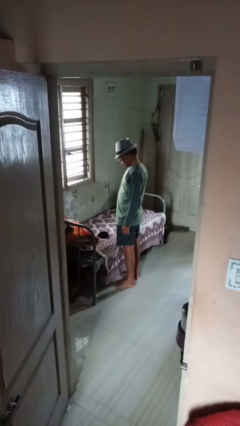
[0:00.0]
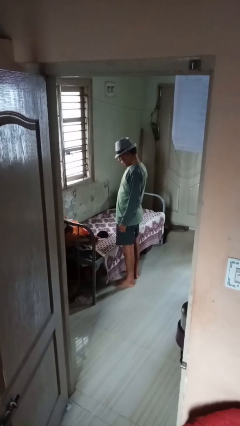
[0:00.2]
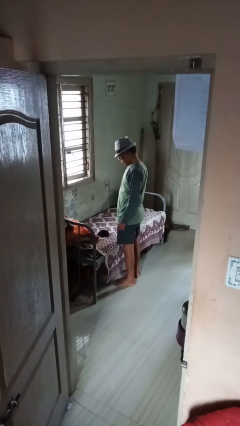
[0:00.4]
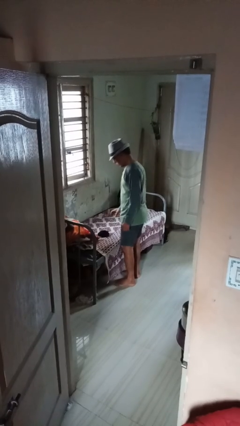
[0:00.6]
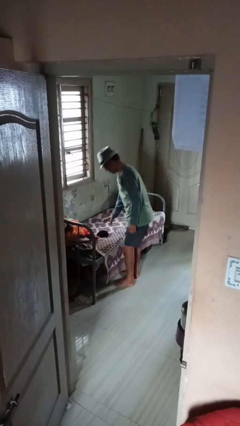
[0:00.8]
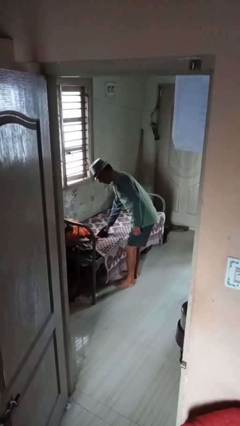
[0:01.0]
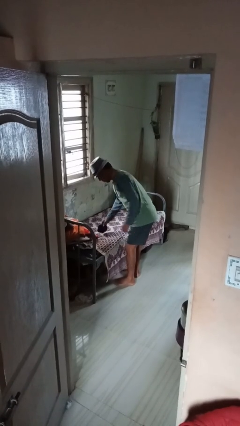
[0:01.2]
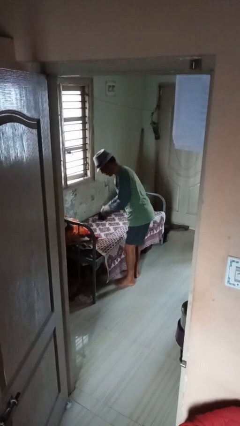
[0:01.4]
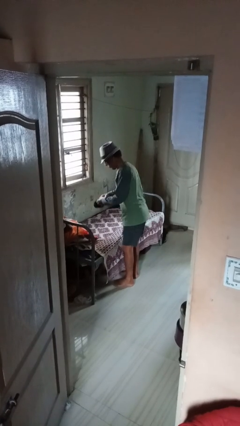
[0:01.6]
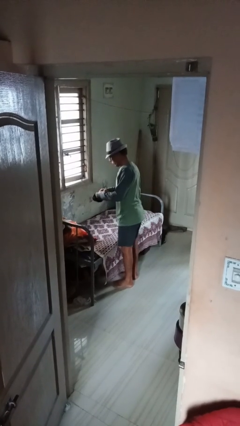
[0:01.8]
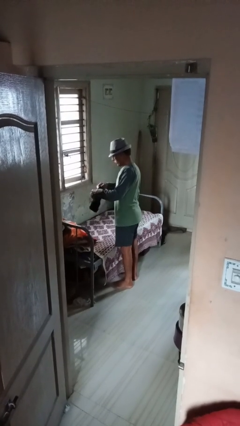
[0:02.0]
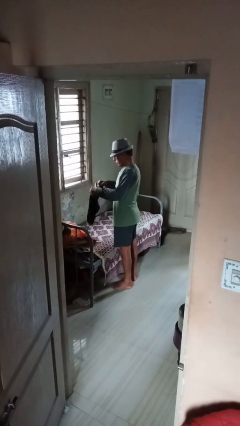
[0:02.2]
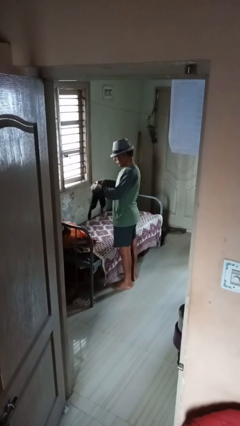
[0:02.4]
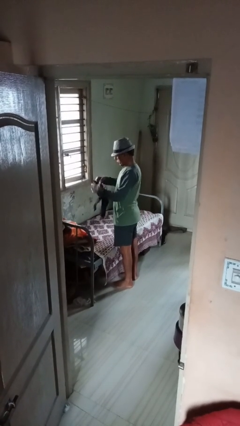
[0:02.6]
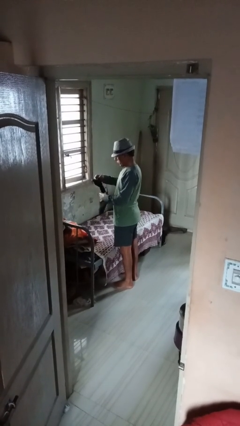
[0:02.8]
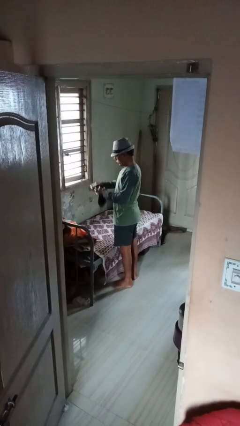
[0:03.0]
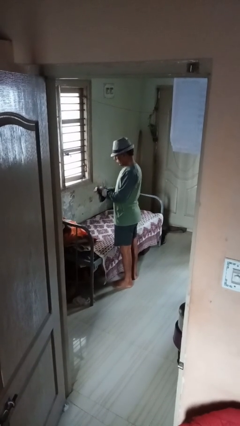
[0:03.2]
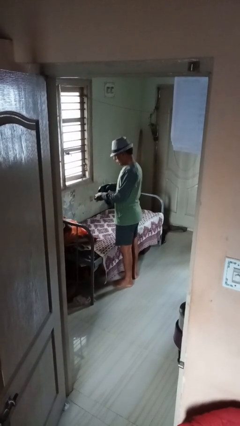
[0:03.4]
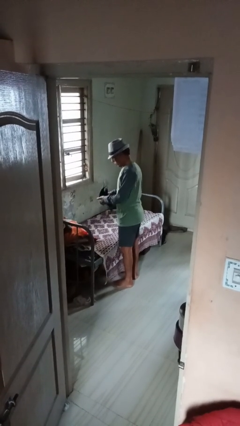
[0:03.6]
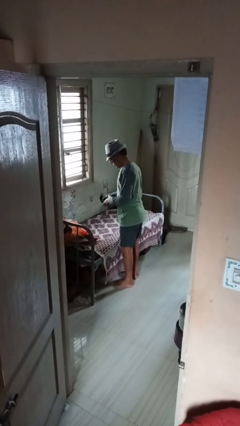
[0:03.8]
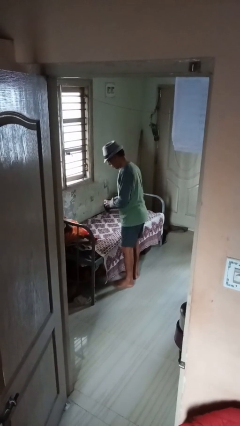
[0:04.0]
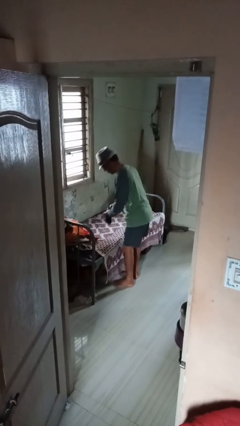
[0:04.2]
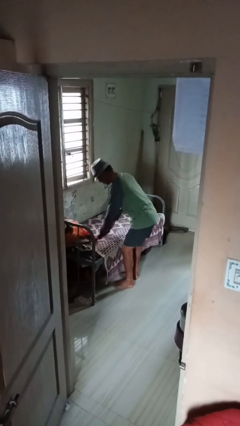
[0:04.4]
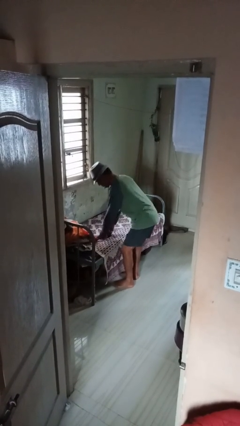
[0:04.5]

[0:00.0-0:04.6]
person folds socks

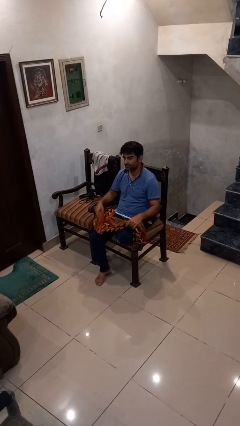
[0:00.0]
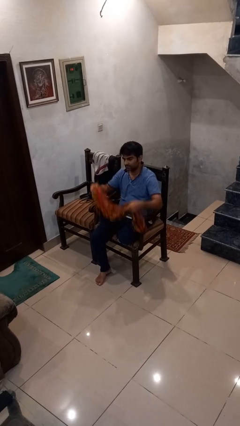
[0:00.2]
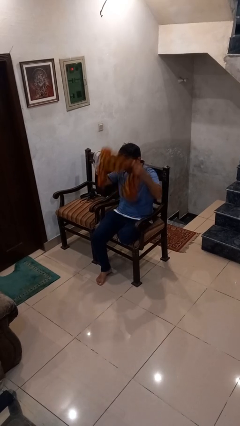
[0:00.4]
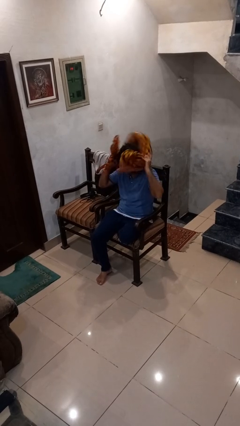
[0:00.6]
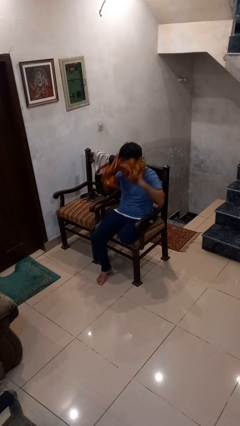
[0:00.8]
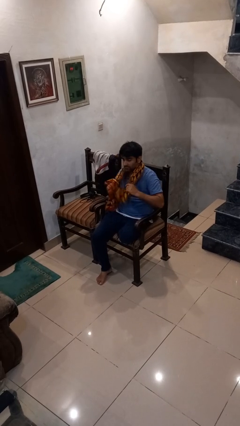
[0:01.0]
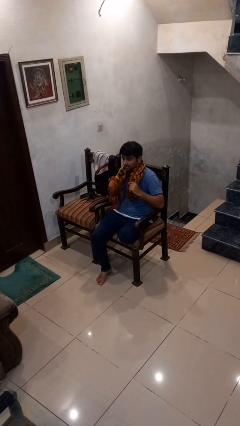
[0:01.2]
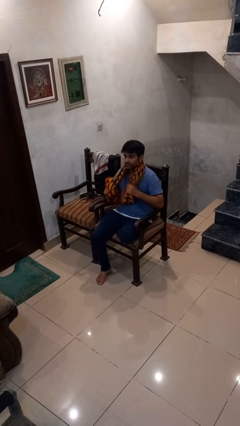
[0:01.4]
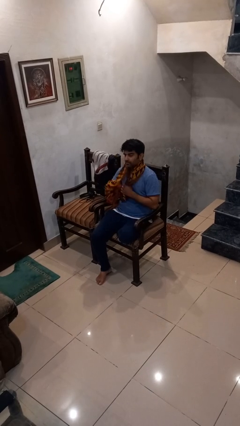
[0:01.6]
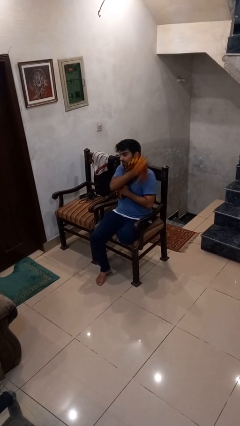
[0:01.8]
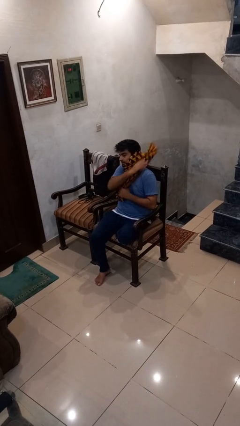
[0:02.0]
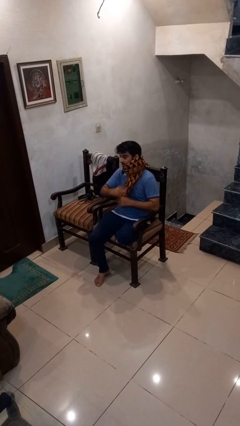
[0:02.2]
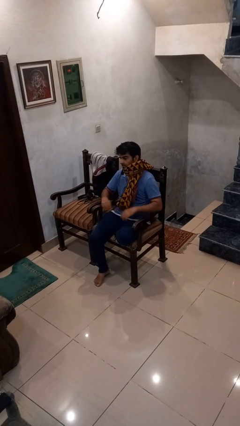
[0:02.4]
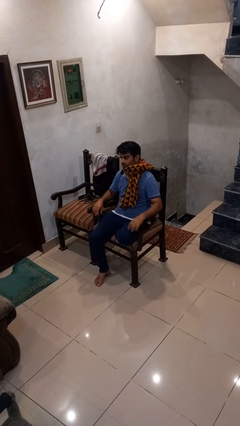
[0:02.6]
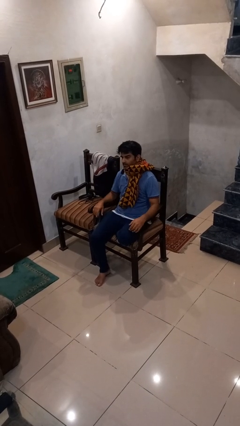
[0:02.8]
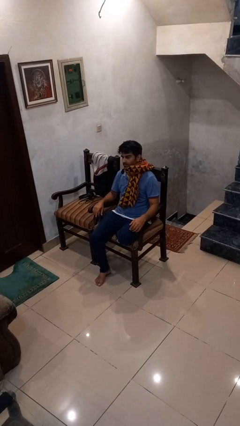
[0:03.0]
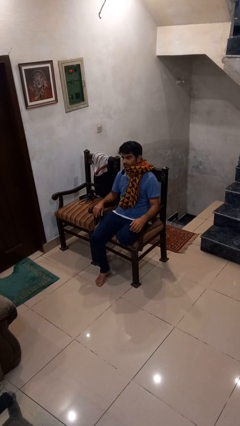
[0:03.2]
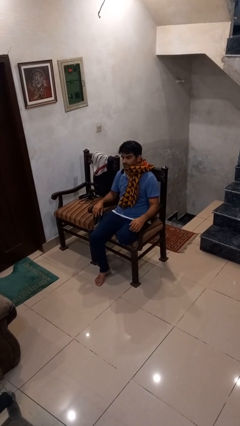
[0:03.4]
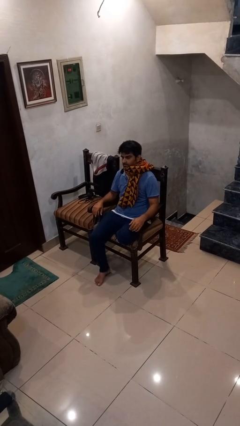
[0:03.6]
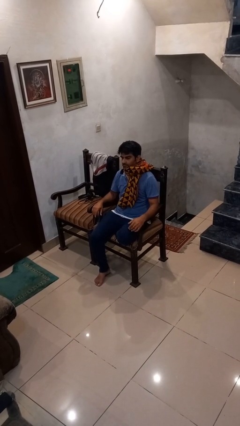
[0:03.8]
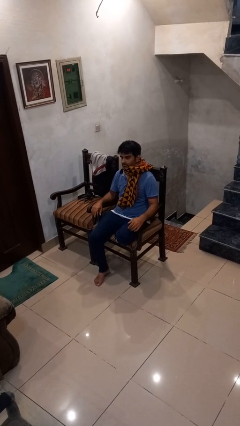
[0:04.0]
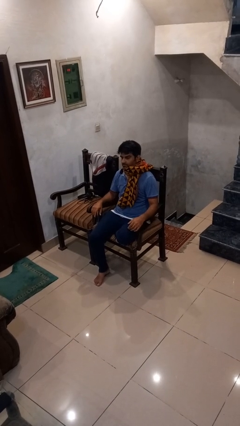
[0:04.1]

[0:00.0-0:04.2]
person puts on scarf

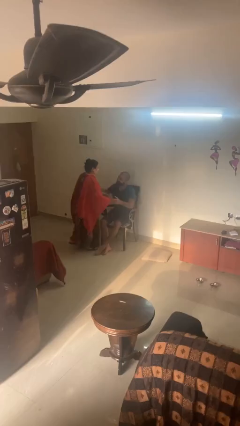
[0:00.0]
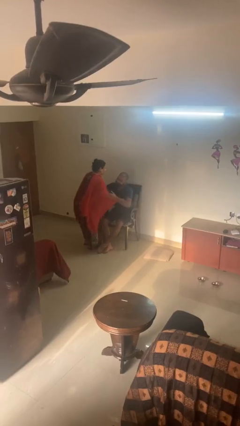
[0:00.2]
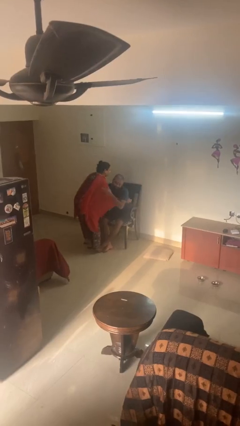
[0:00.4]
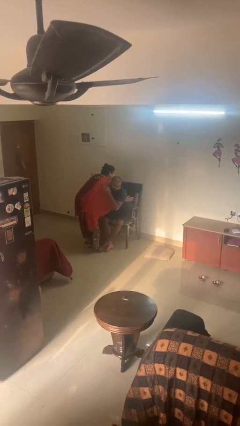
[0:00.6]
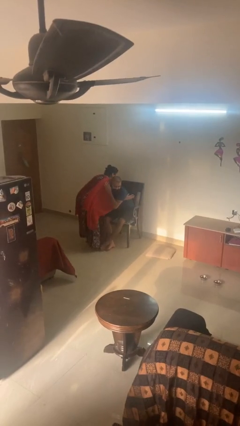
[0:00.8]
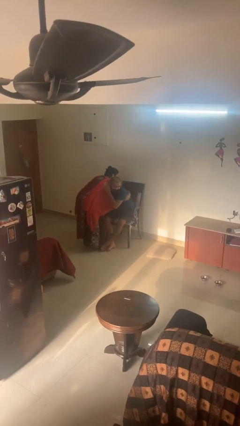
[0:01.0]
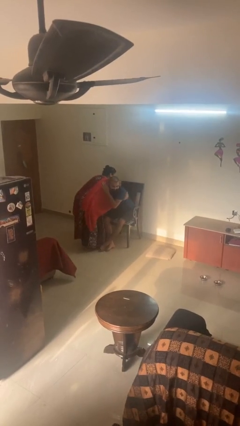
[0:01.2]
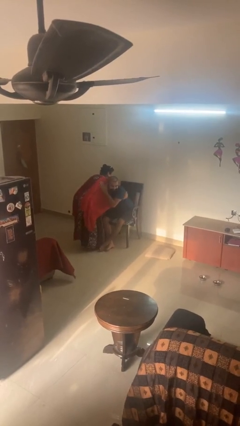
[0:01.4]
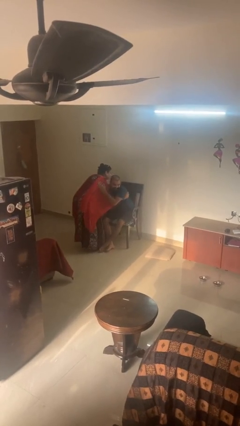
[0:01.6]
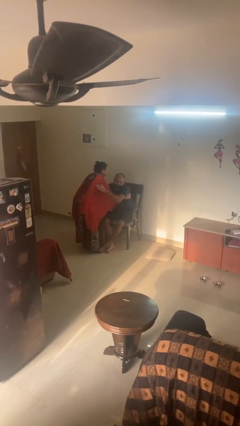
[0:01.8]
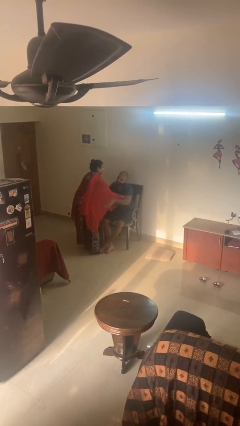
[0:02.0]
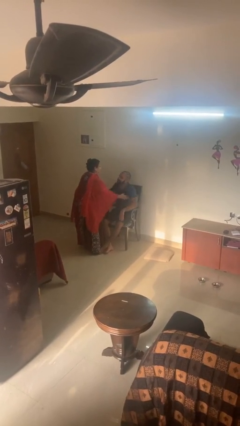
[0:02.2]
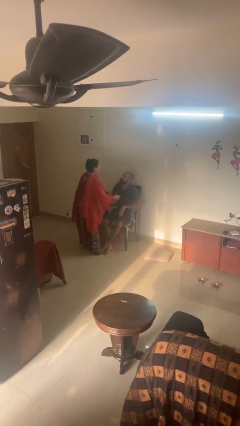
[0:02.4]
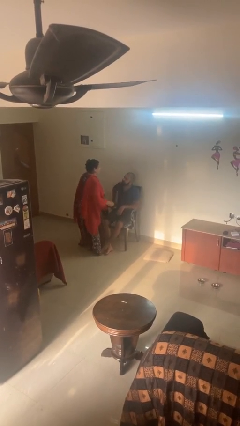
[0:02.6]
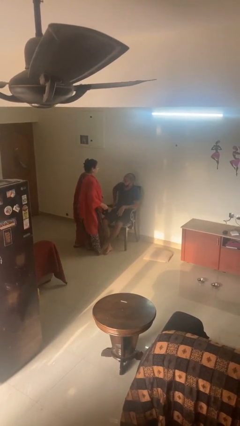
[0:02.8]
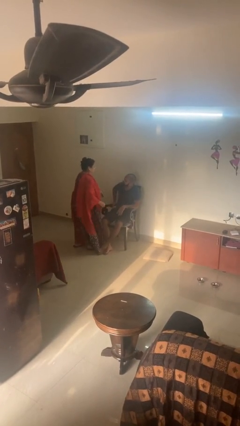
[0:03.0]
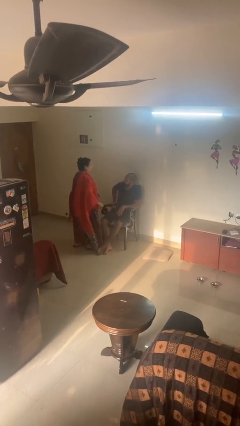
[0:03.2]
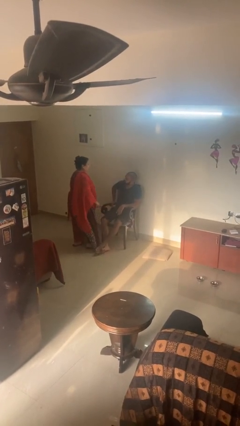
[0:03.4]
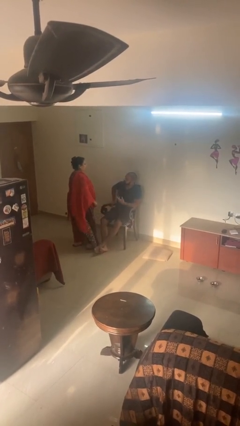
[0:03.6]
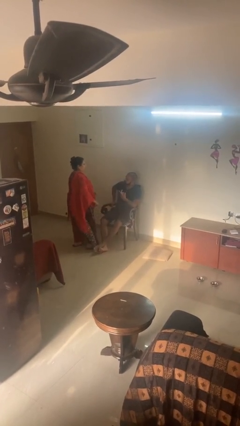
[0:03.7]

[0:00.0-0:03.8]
person embraces person

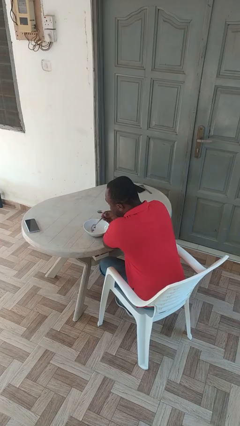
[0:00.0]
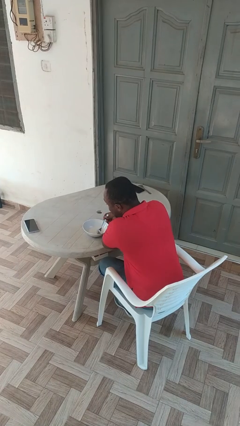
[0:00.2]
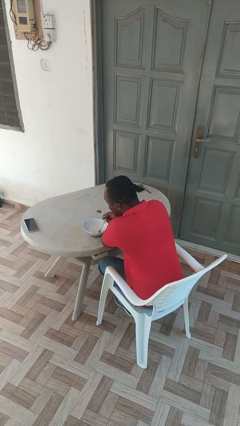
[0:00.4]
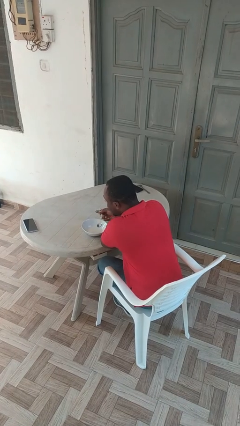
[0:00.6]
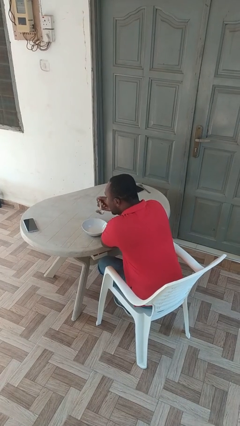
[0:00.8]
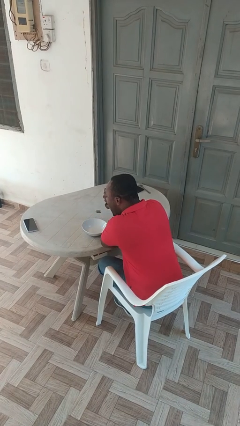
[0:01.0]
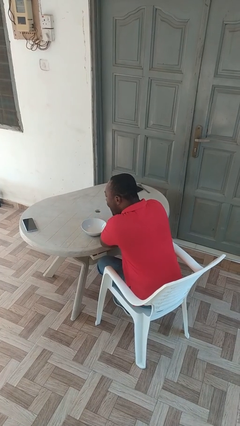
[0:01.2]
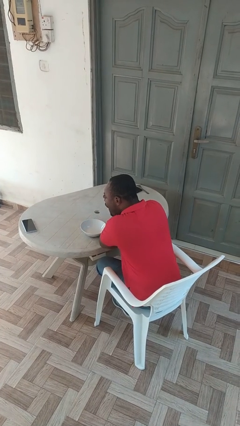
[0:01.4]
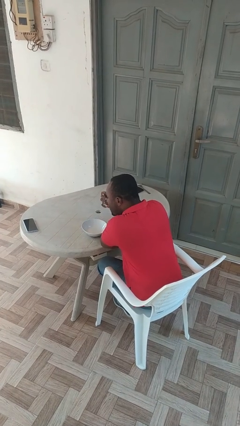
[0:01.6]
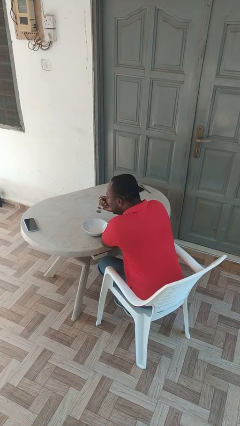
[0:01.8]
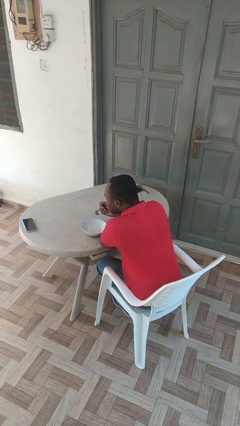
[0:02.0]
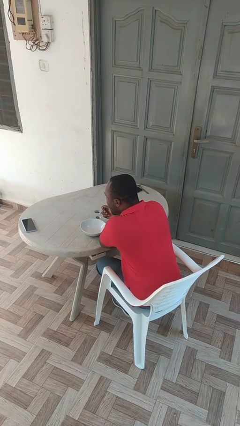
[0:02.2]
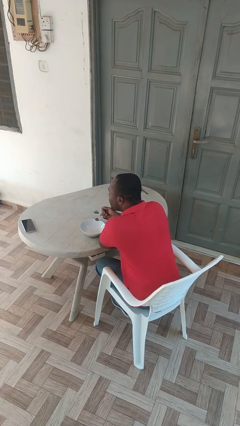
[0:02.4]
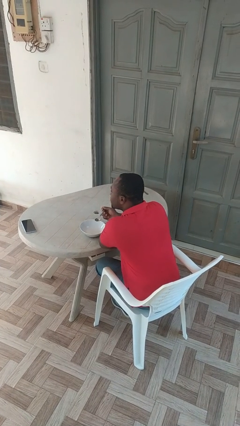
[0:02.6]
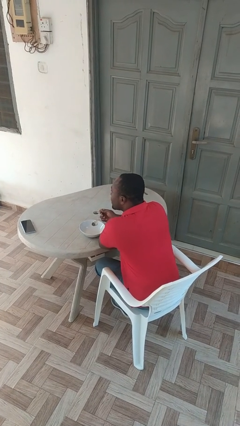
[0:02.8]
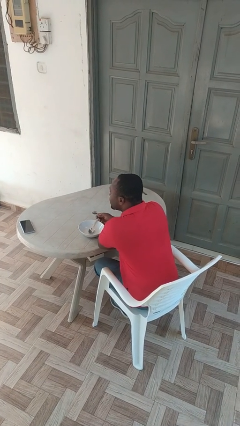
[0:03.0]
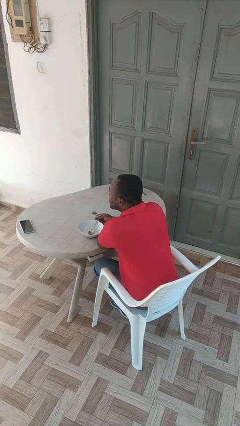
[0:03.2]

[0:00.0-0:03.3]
person eats with utensil

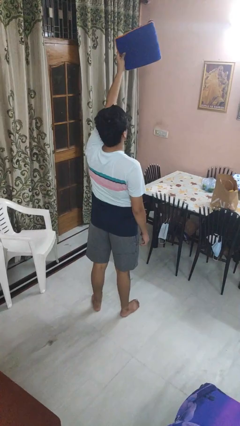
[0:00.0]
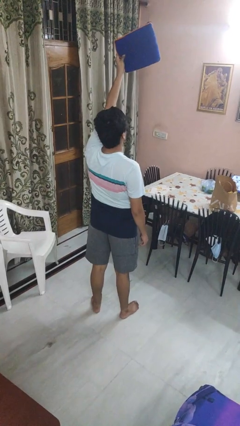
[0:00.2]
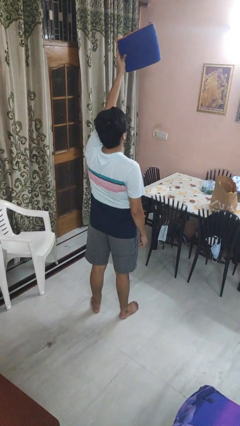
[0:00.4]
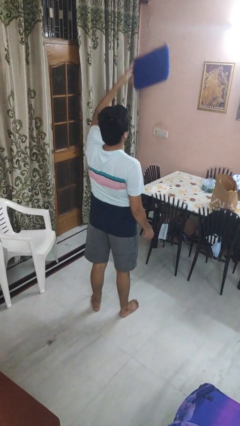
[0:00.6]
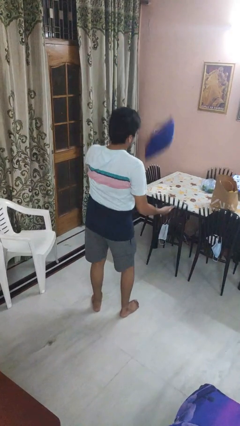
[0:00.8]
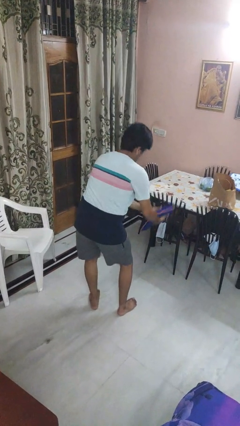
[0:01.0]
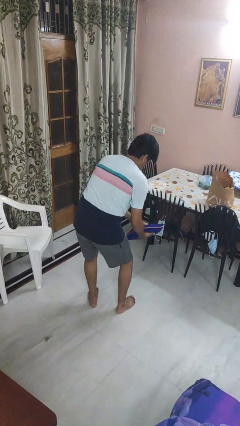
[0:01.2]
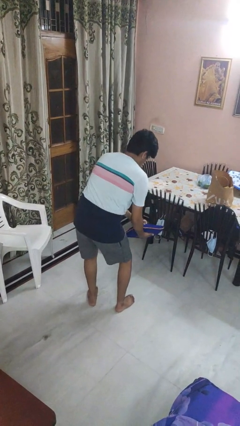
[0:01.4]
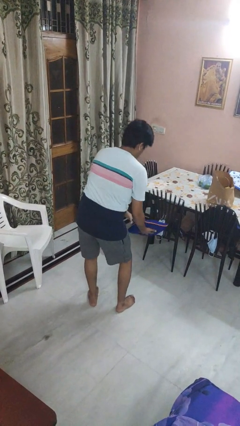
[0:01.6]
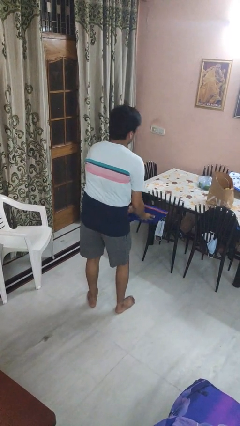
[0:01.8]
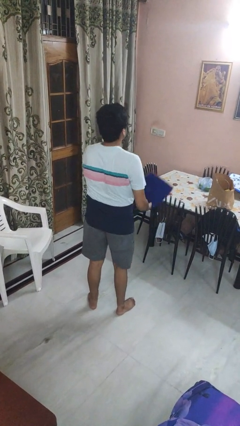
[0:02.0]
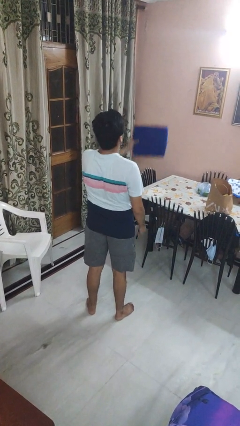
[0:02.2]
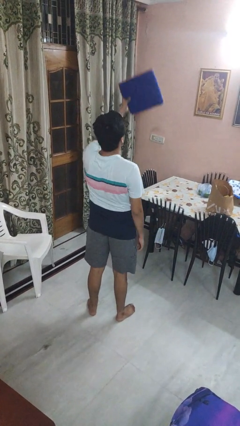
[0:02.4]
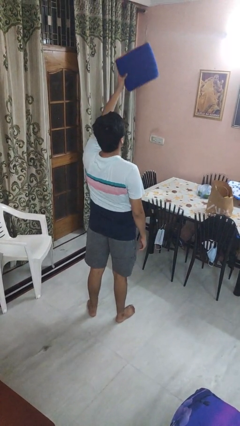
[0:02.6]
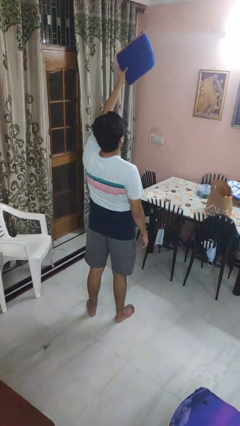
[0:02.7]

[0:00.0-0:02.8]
person catches dropped object
